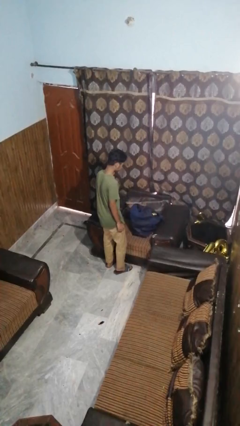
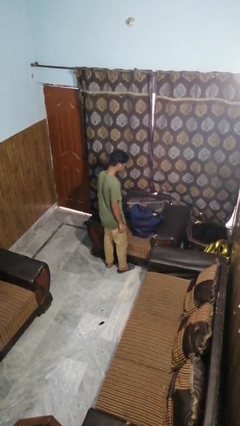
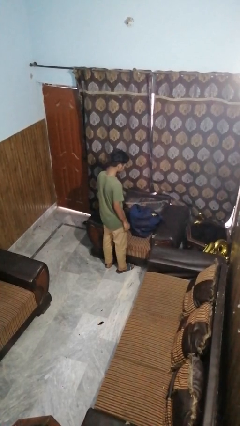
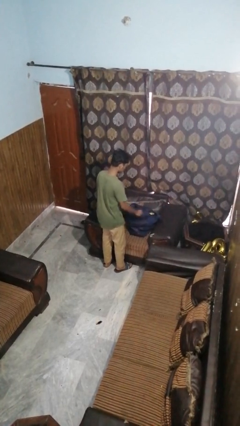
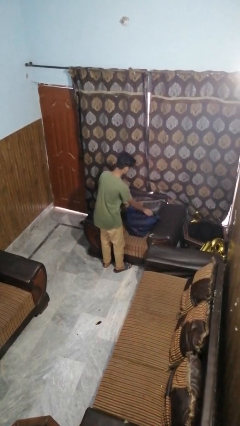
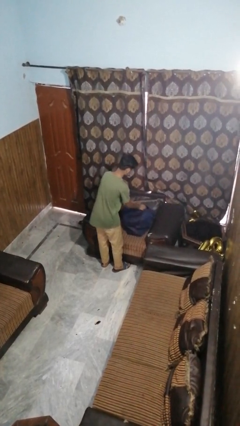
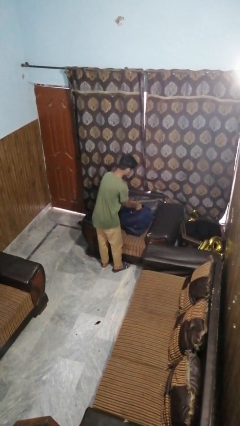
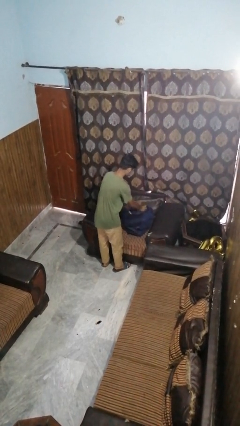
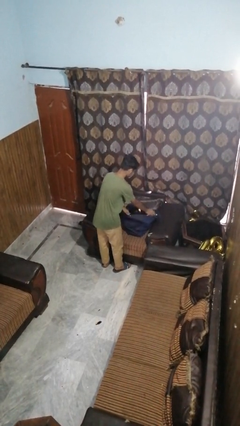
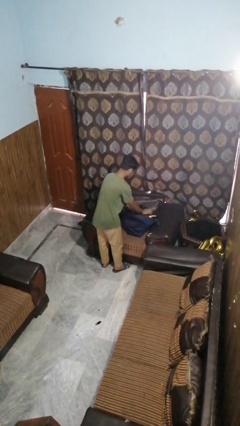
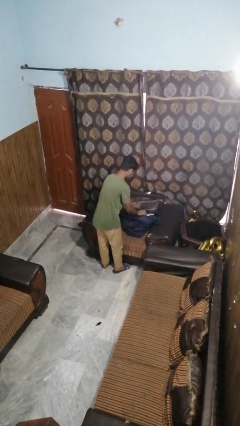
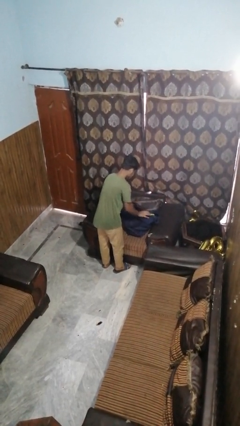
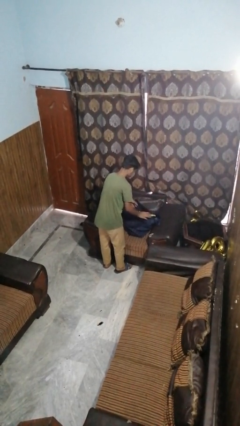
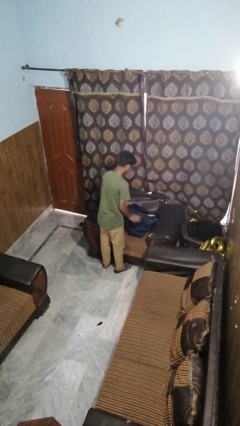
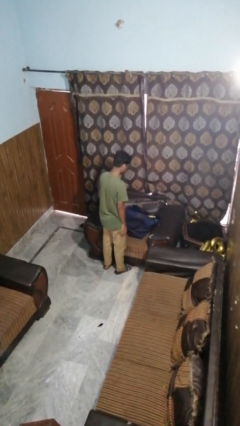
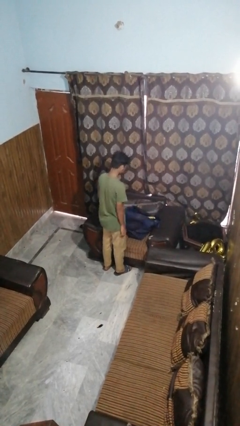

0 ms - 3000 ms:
person searches in bag

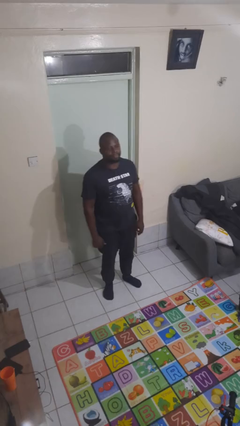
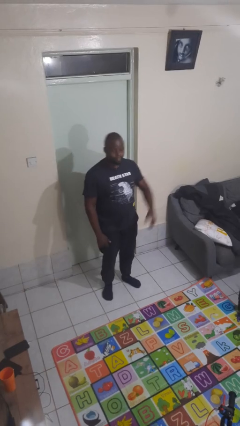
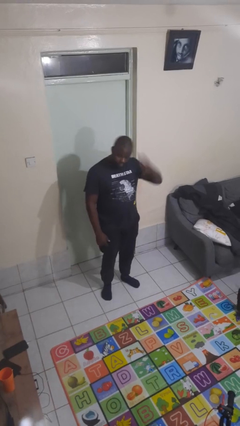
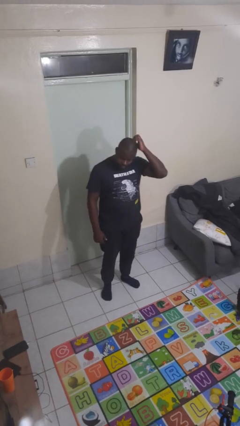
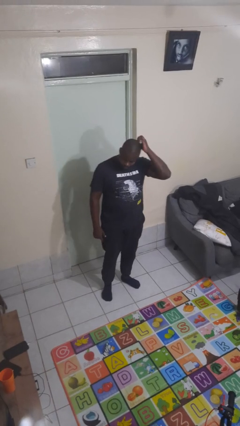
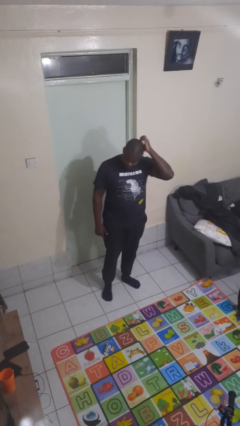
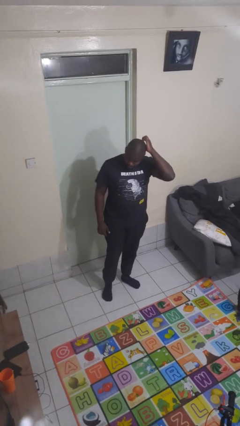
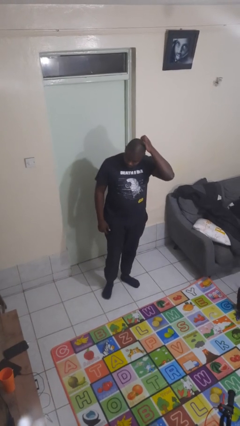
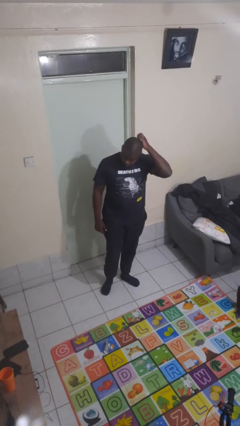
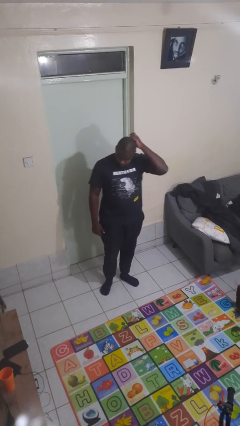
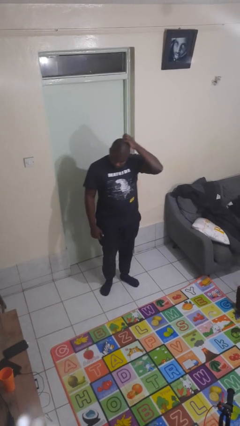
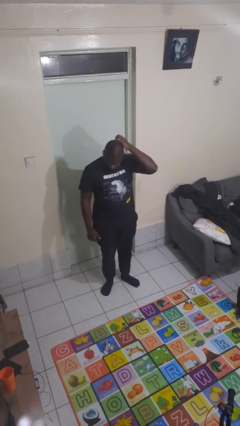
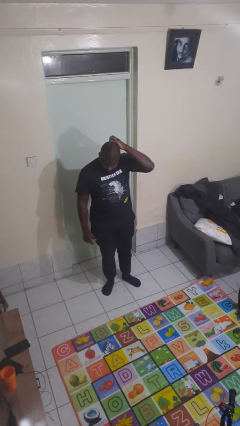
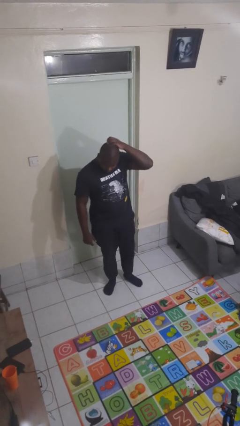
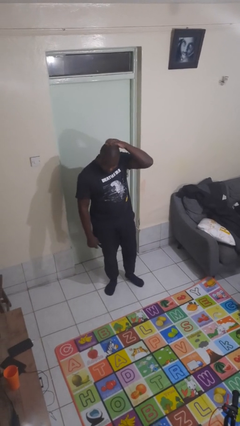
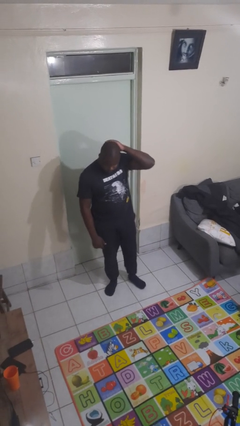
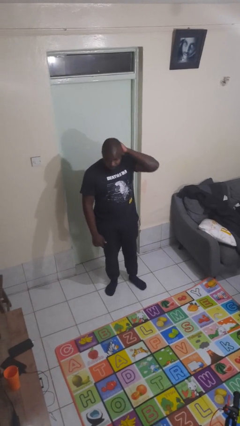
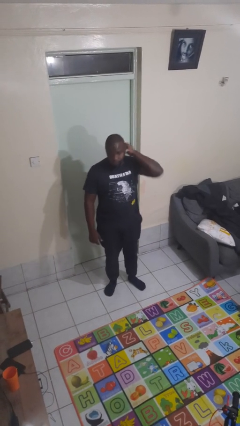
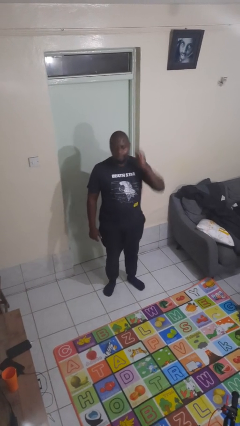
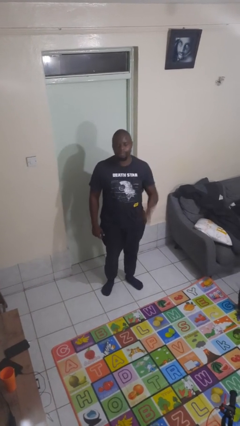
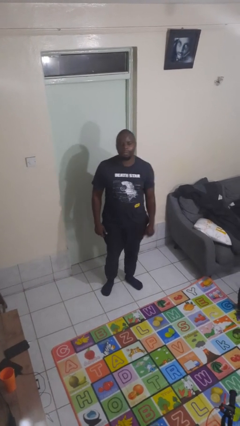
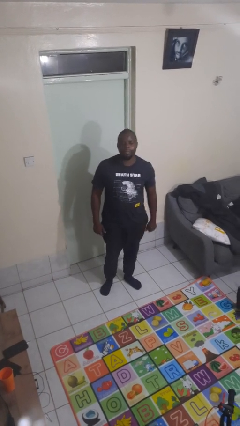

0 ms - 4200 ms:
person scratches face

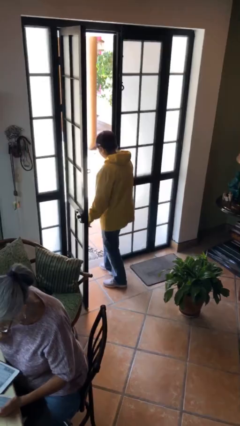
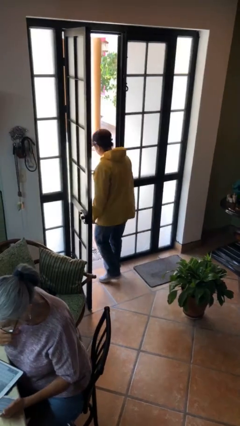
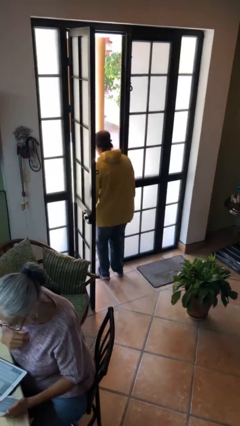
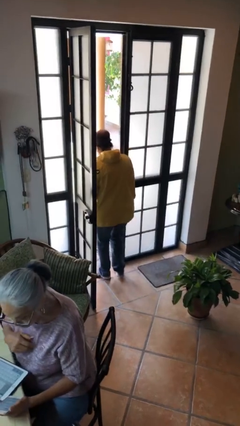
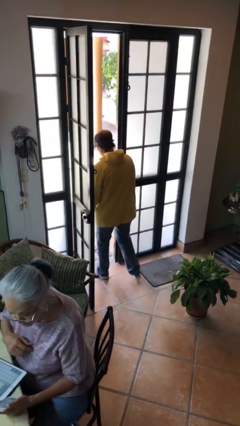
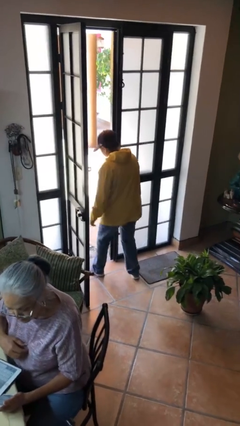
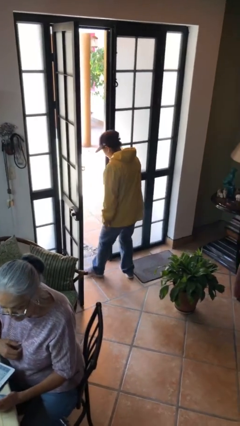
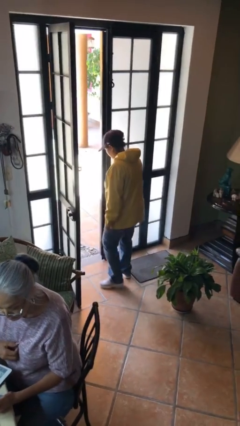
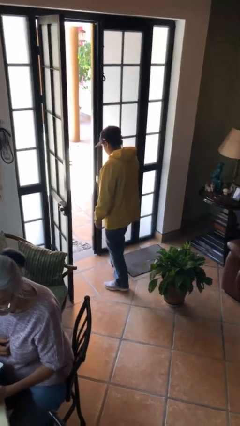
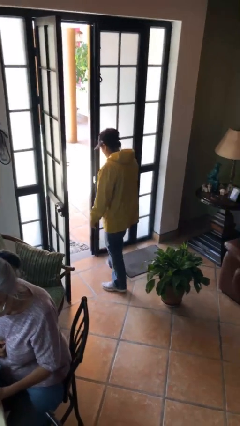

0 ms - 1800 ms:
person bumps into wall

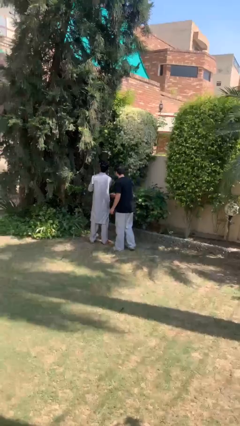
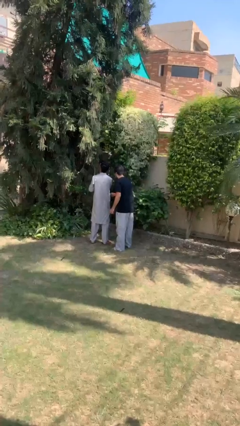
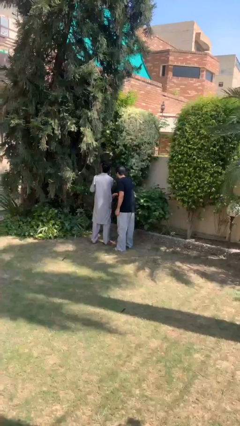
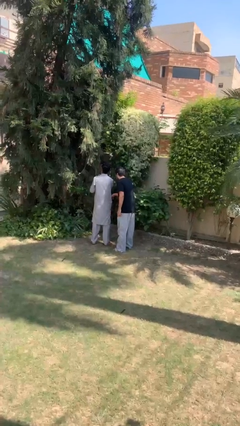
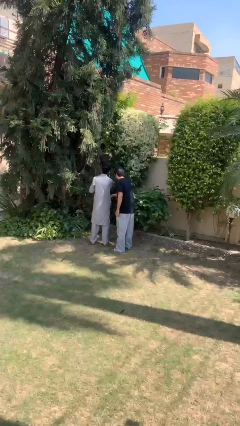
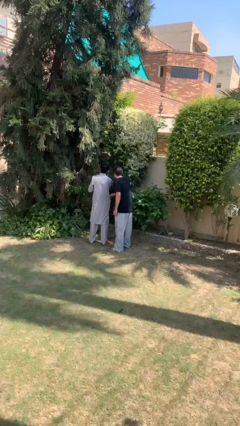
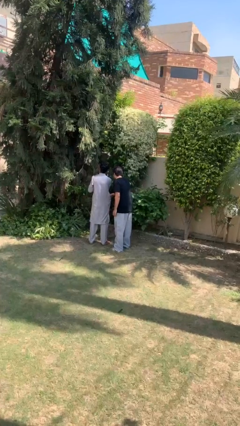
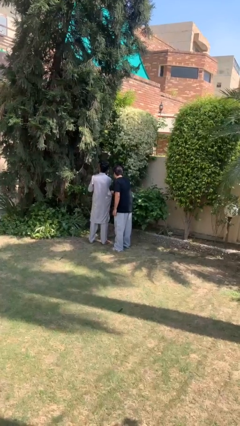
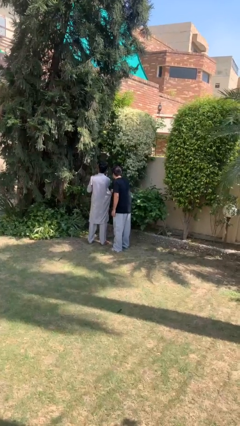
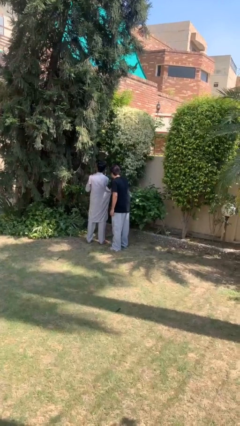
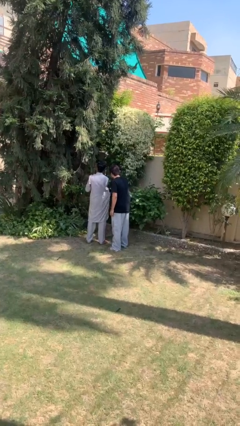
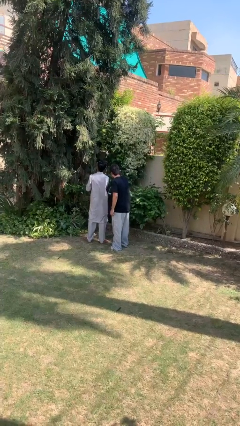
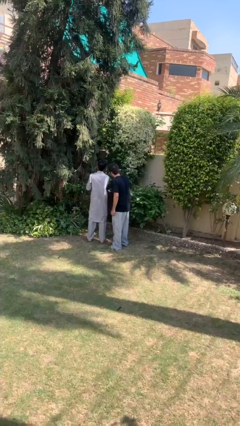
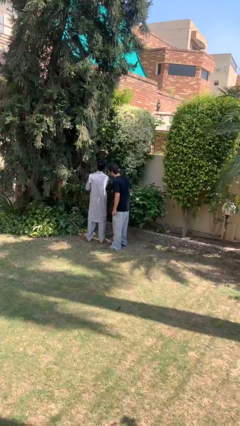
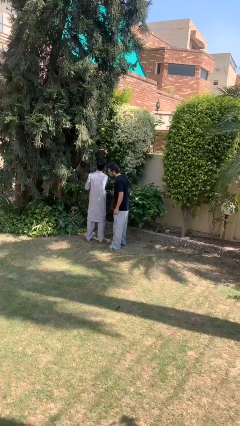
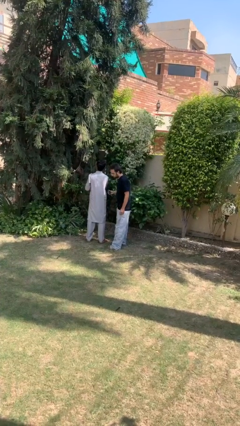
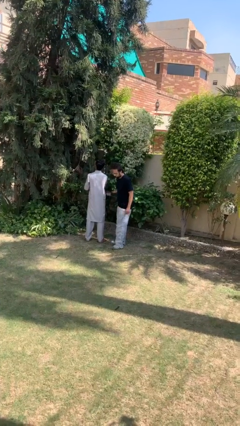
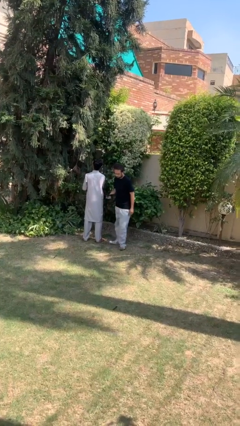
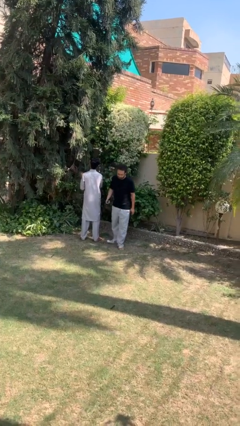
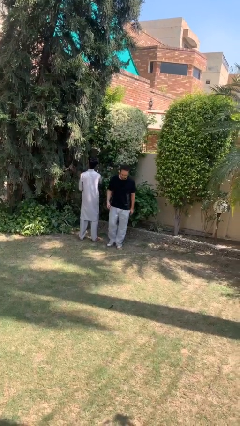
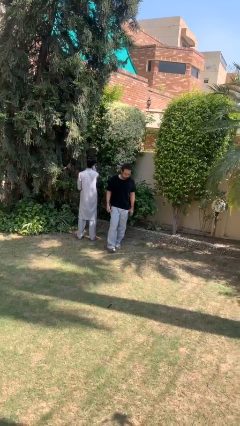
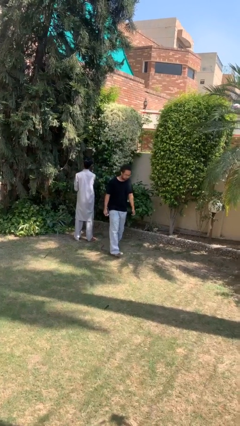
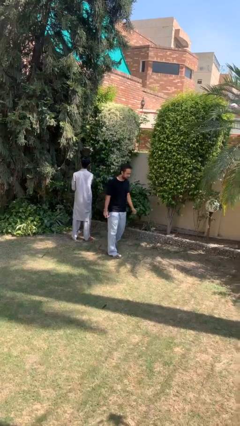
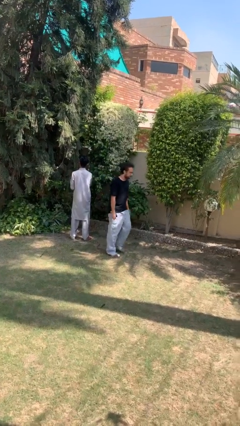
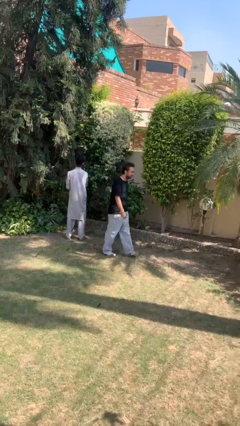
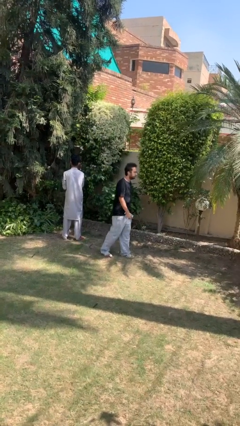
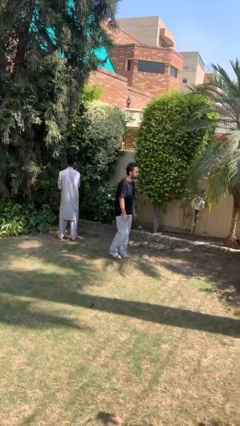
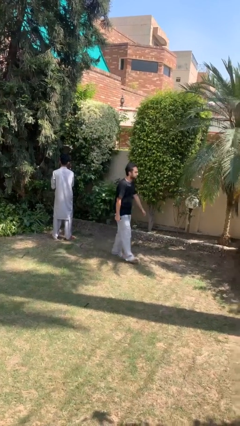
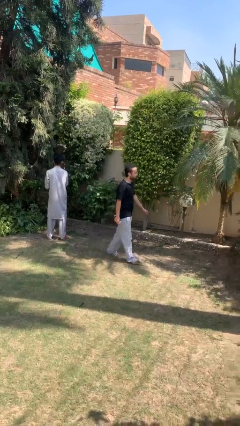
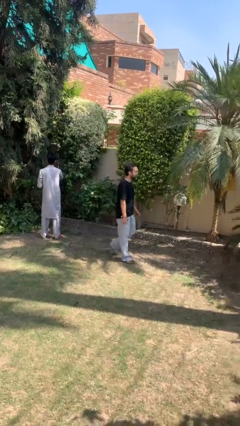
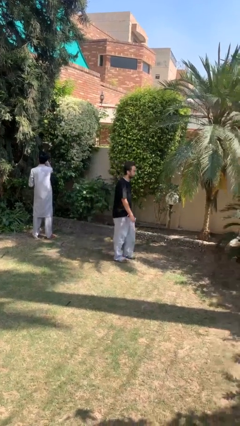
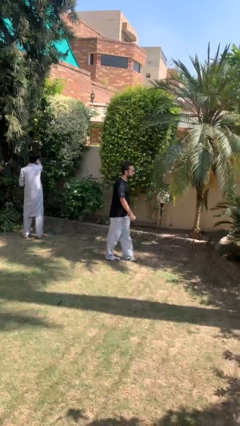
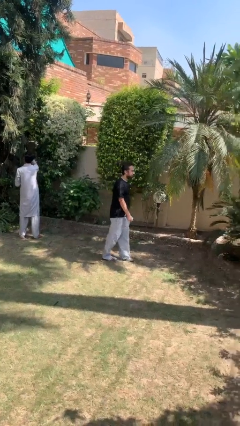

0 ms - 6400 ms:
person steals object from person

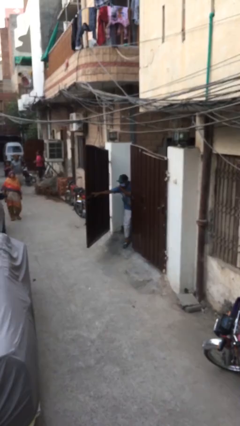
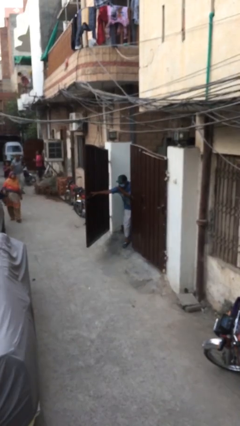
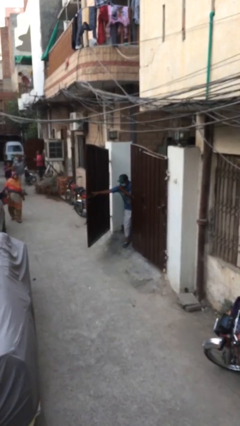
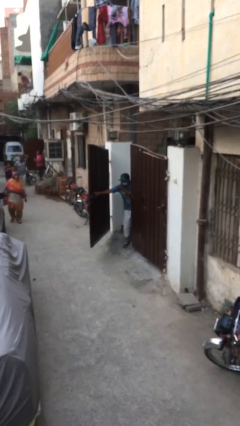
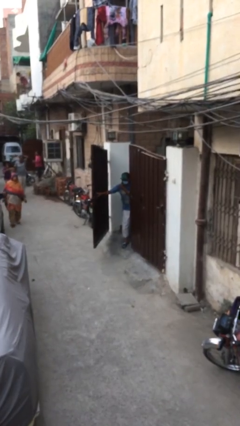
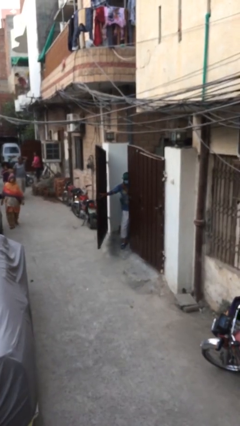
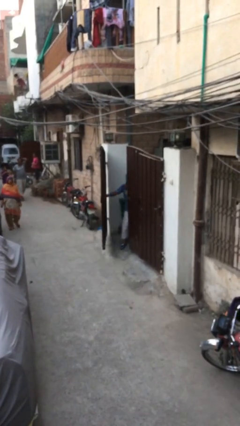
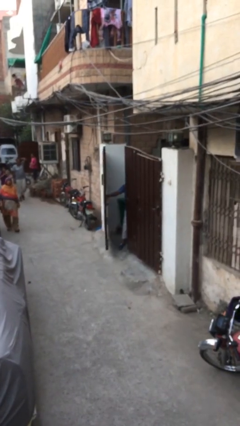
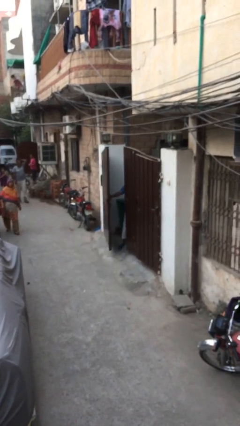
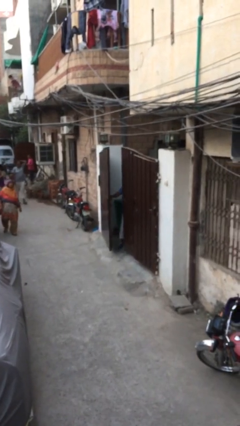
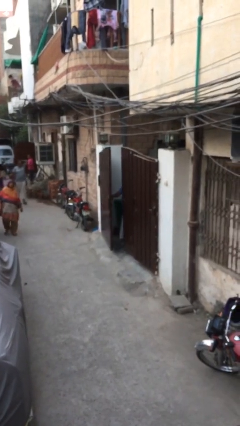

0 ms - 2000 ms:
person closes facility door

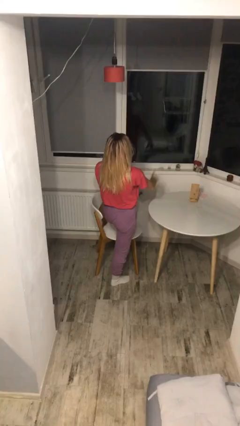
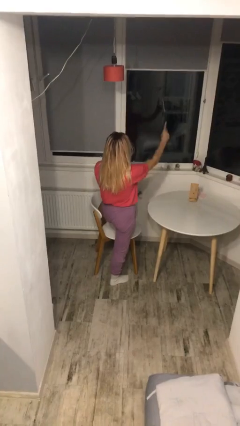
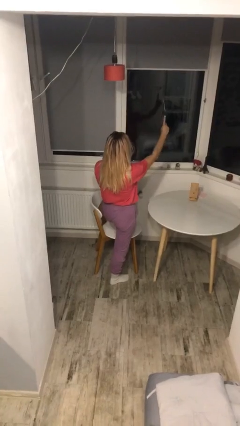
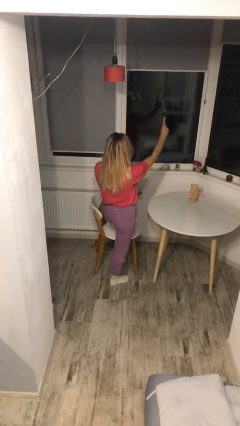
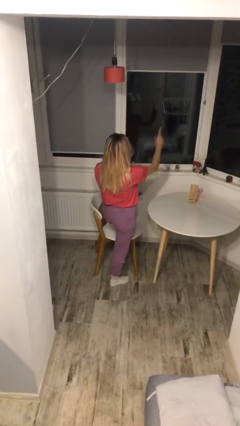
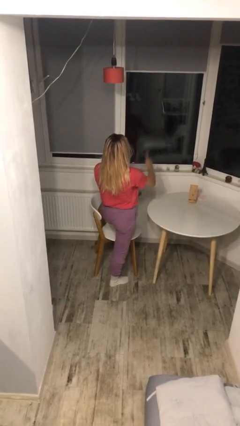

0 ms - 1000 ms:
person gestures number one
